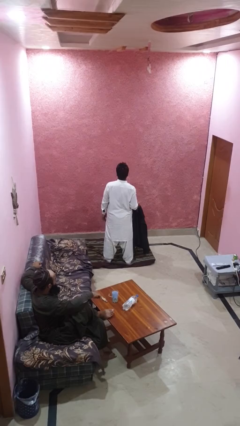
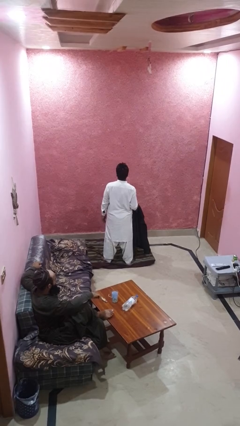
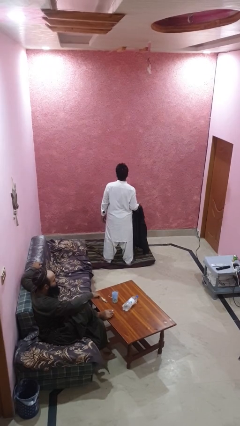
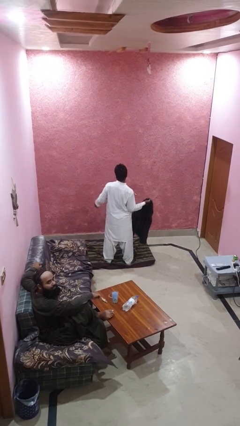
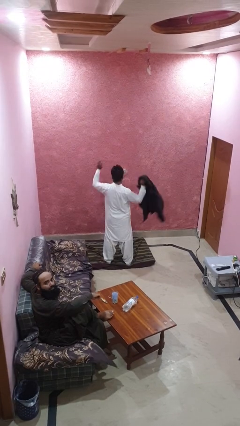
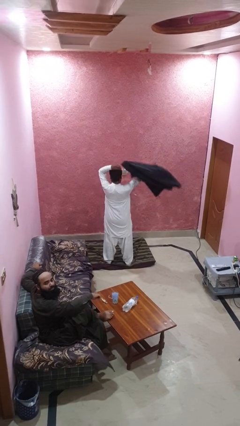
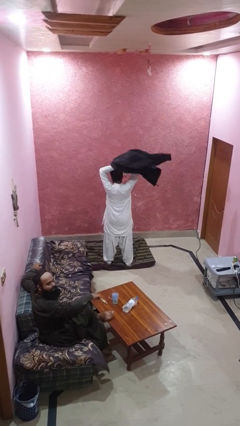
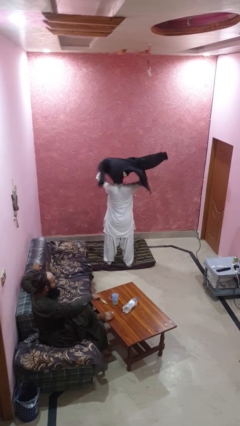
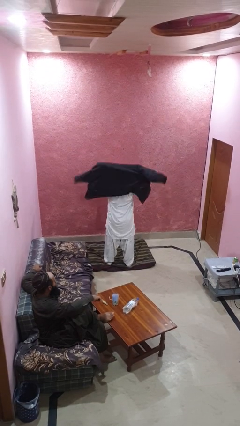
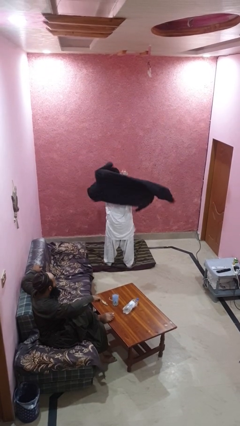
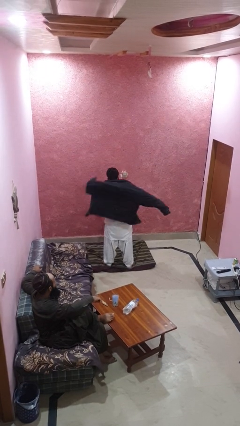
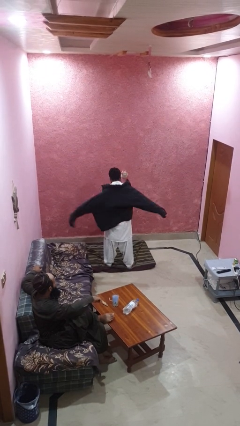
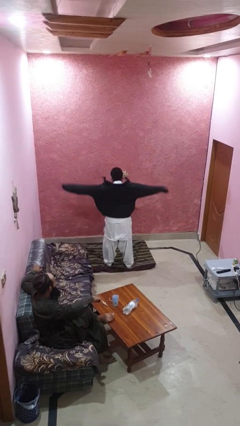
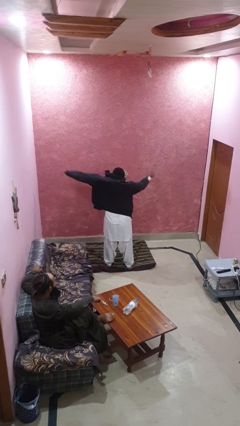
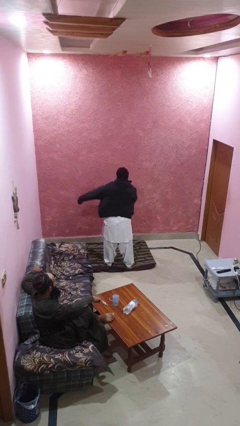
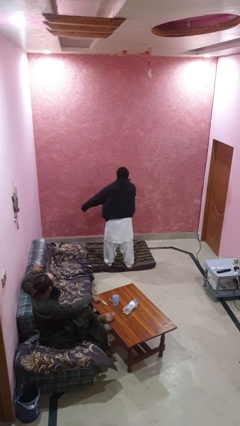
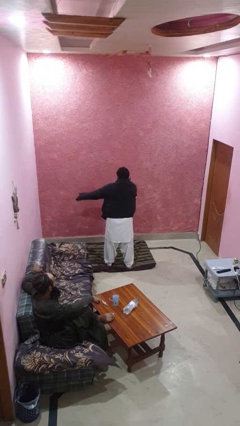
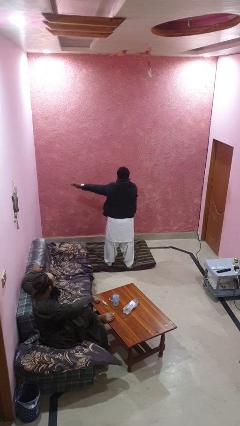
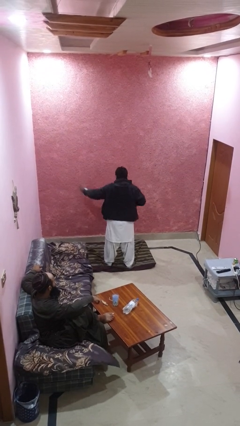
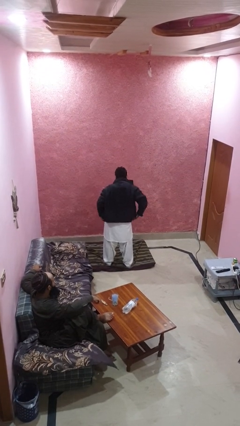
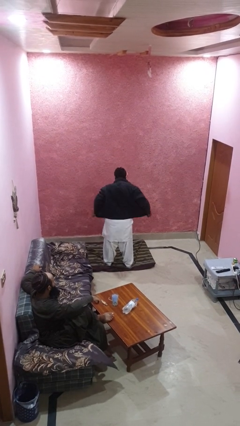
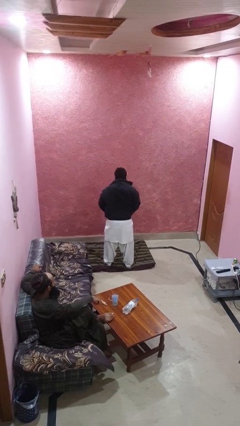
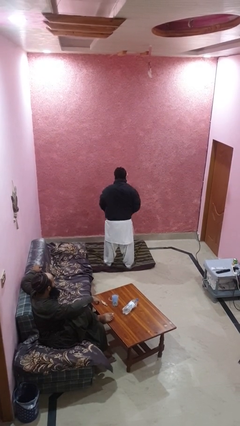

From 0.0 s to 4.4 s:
person puts on jacket

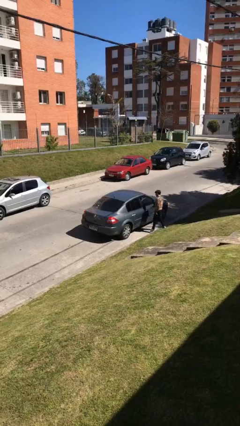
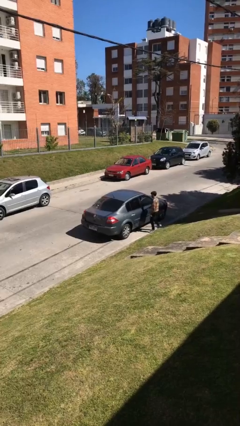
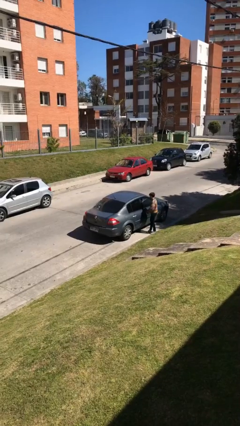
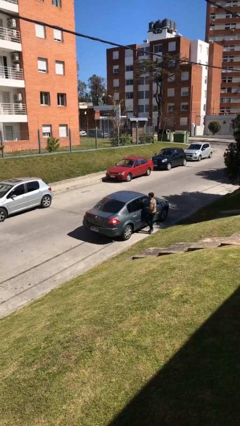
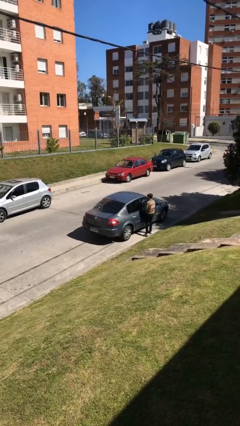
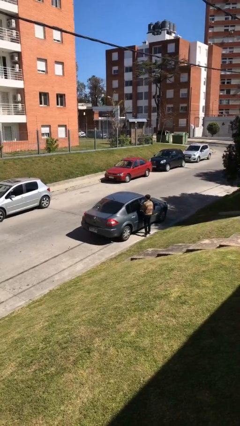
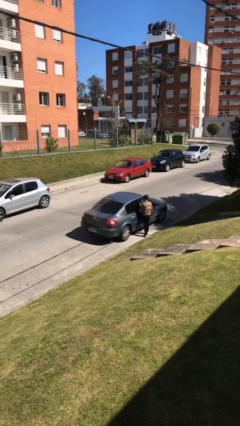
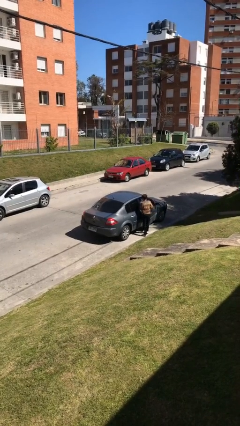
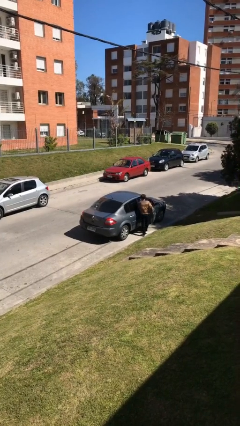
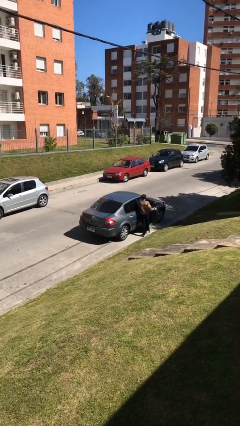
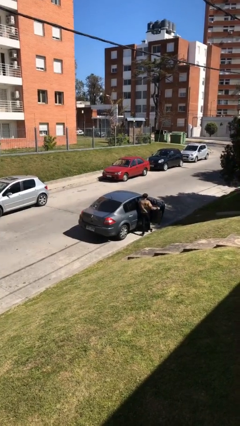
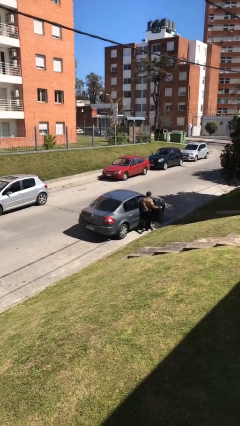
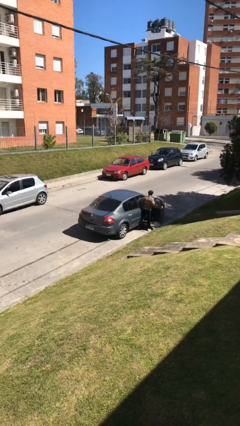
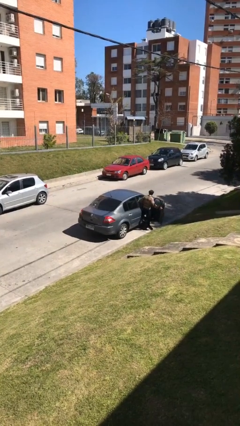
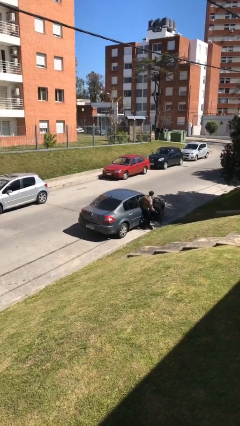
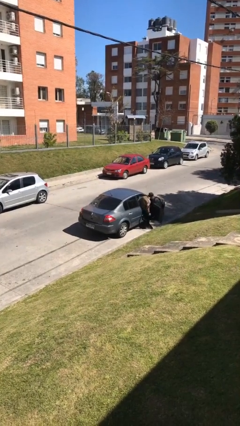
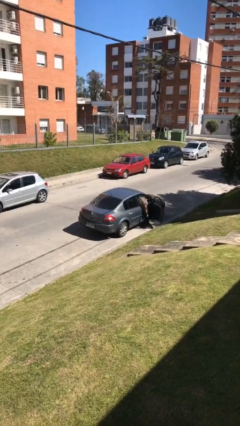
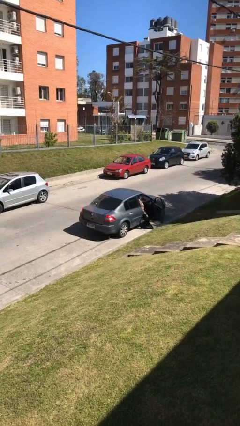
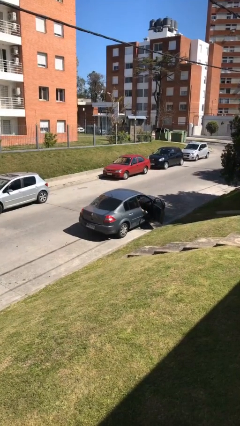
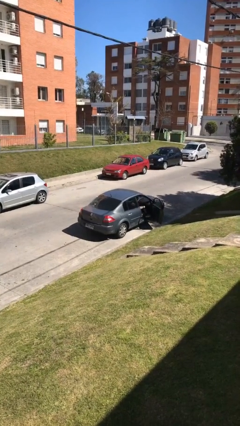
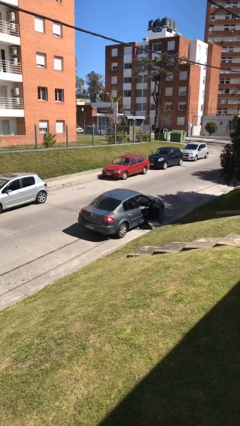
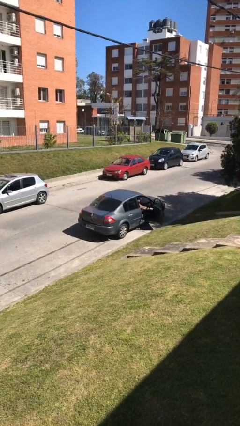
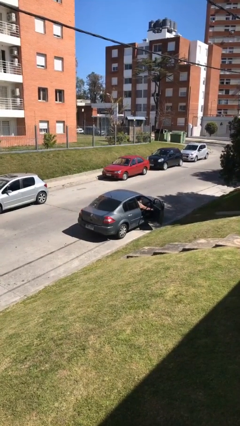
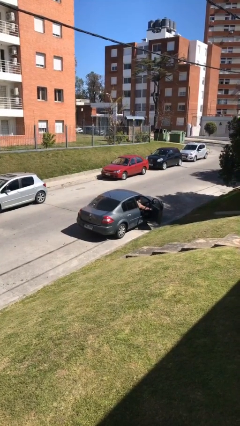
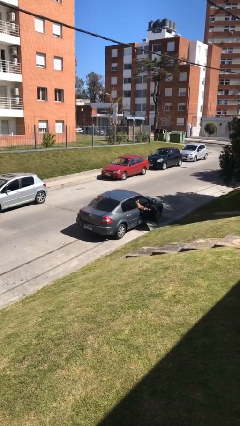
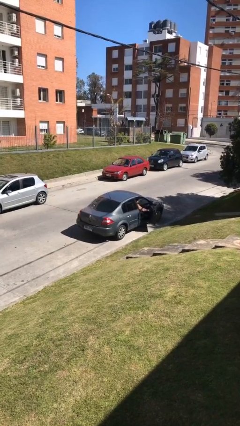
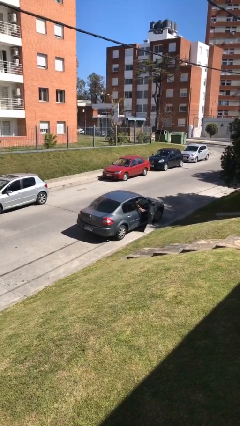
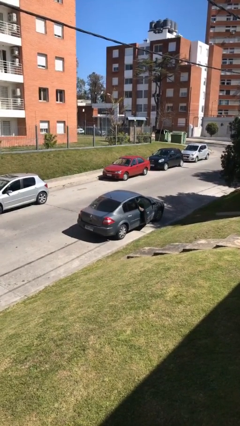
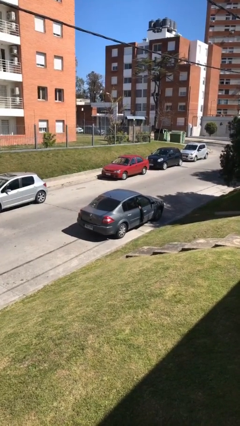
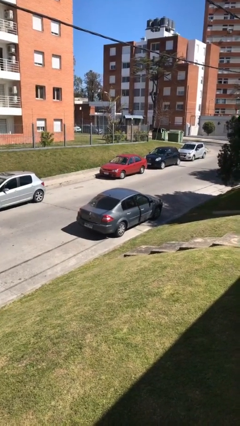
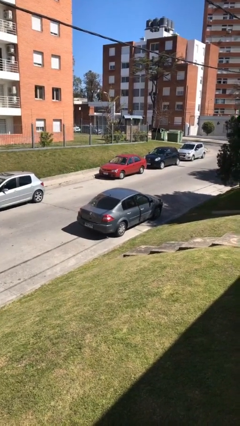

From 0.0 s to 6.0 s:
car picks up person

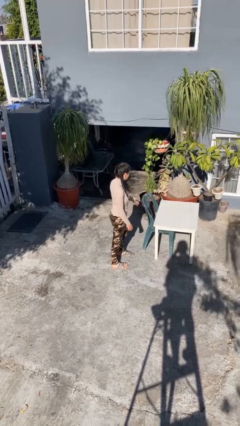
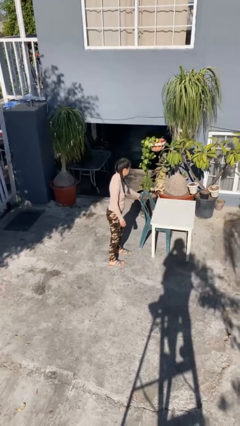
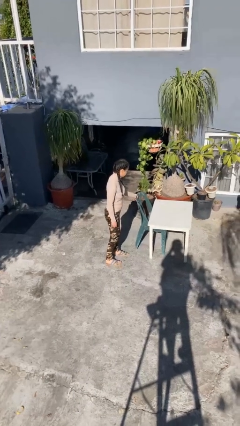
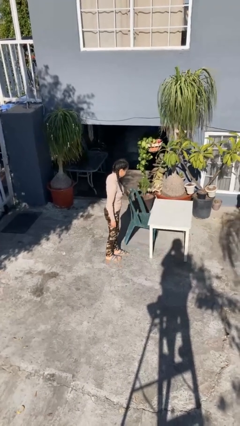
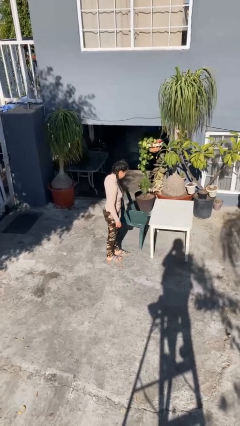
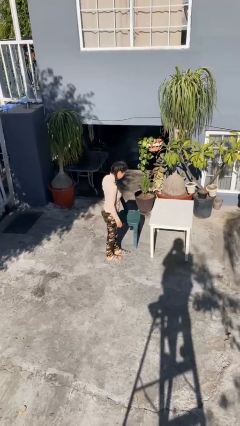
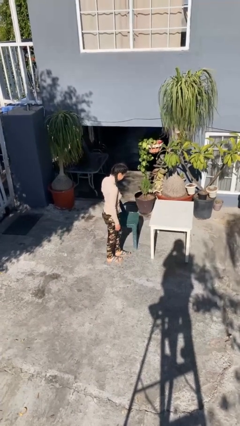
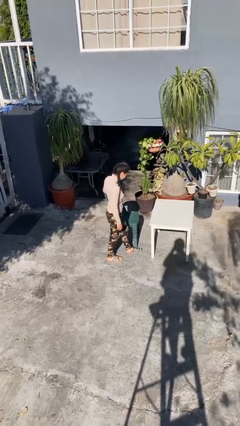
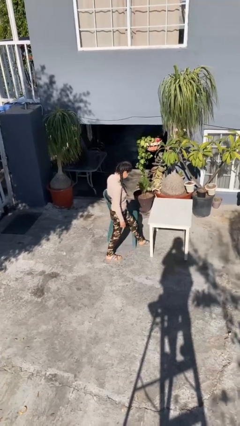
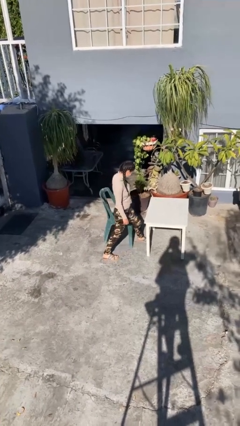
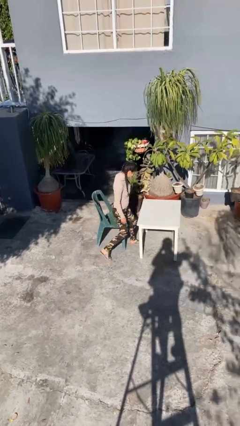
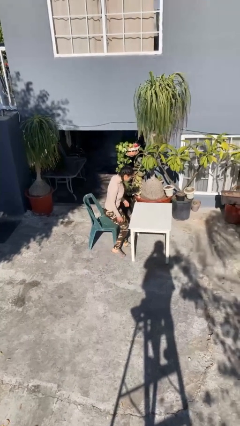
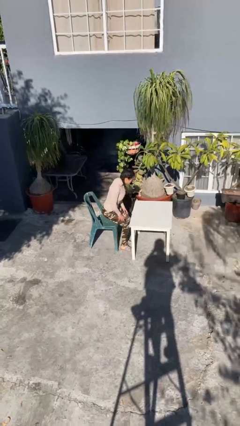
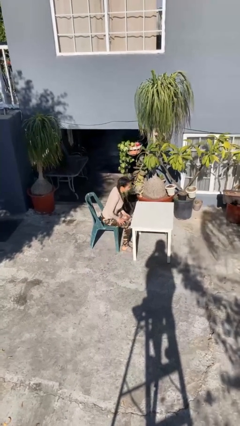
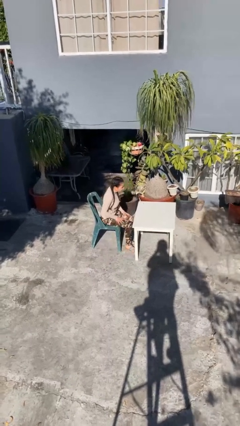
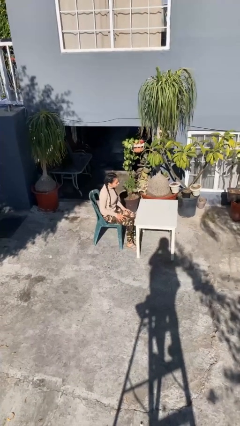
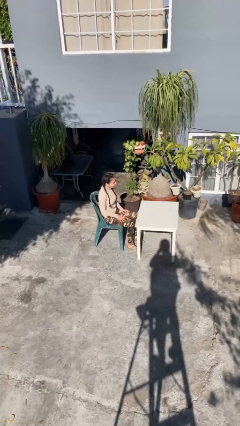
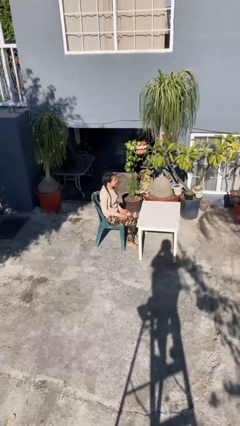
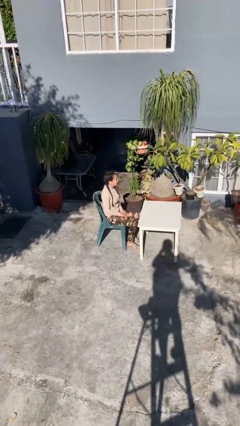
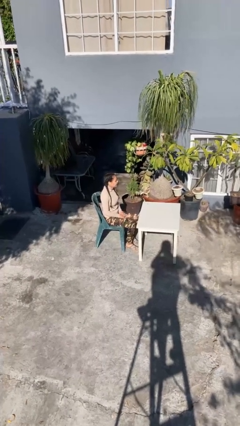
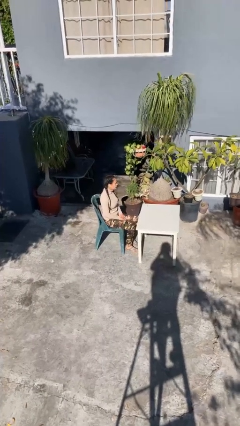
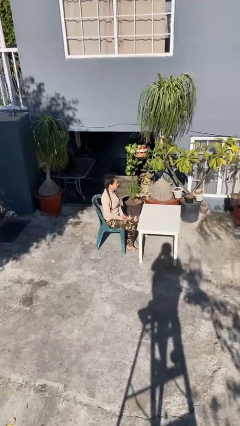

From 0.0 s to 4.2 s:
person sits down

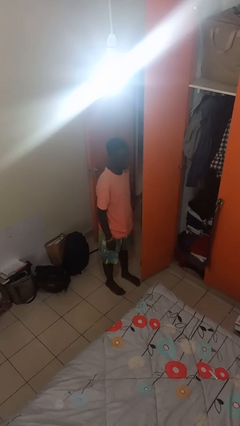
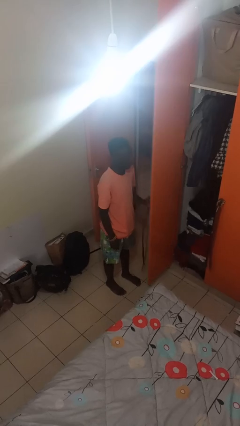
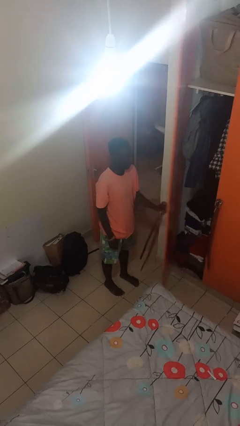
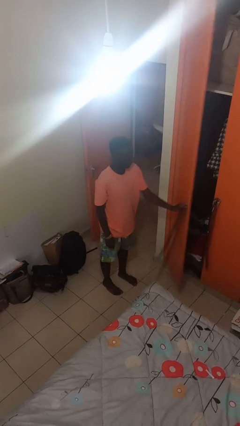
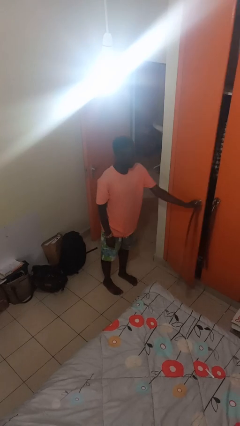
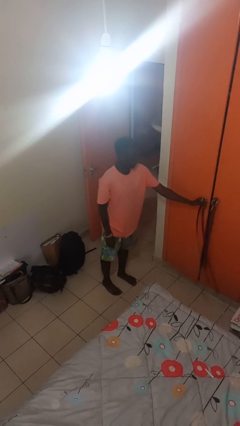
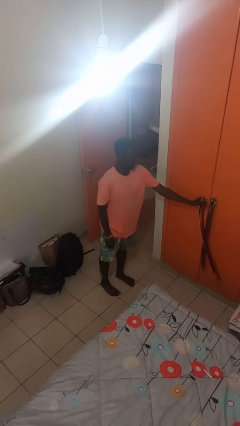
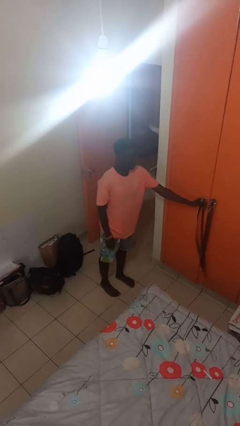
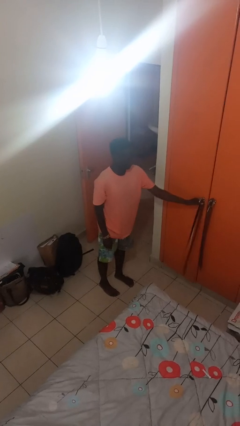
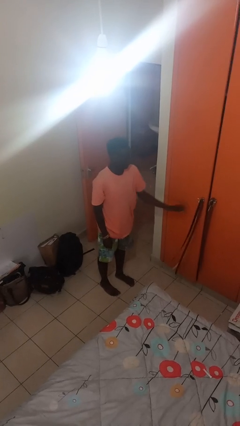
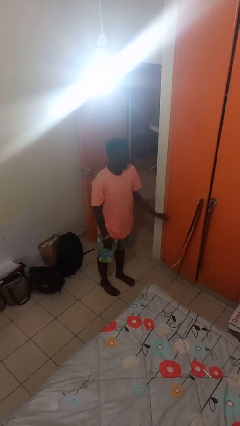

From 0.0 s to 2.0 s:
person closes closet door

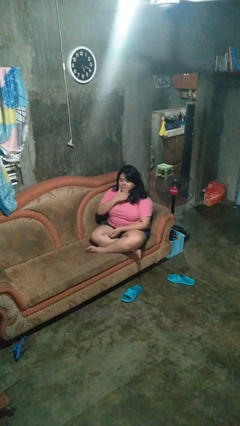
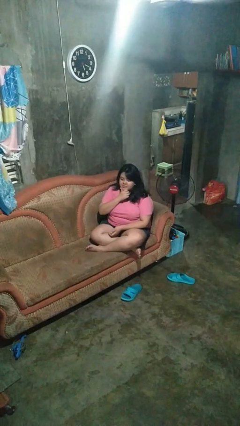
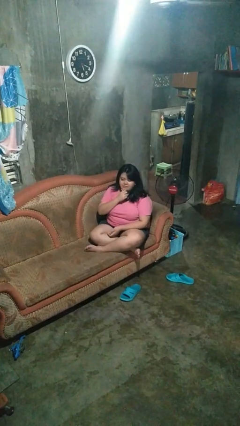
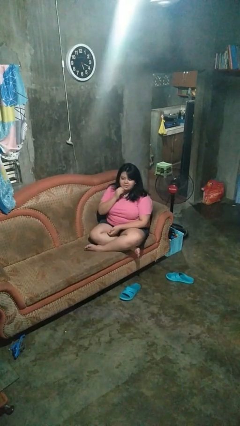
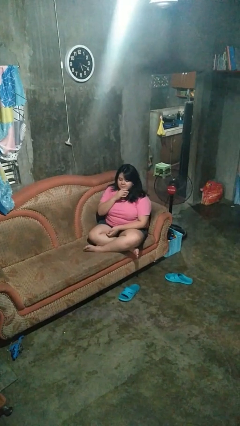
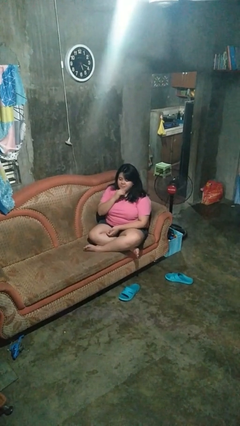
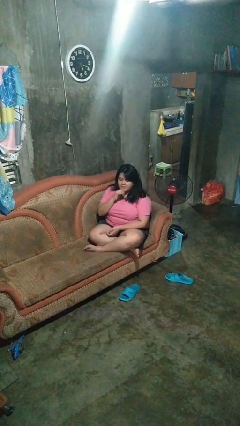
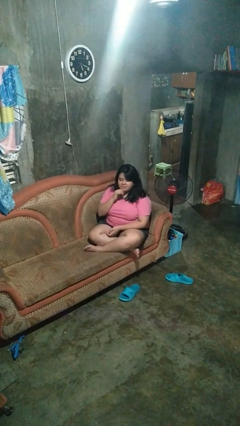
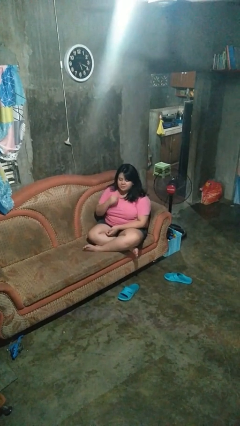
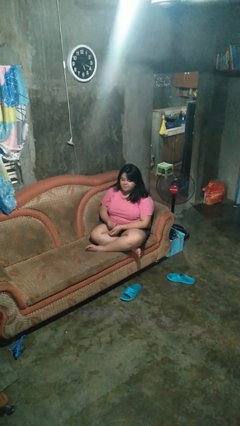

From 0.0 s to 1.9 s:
person strokes chin
